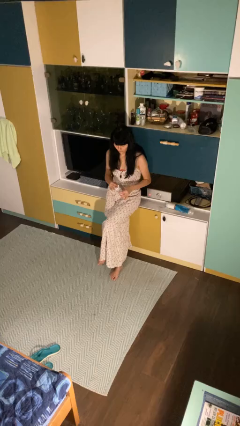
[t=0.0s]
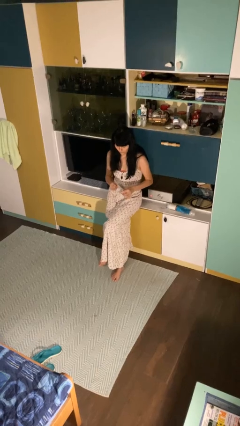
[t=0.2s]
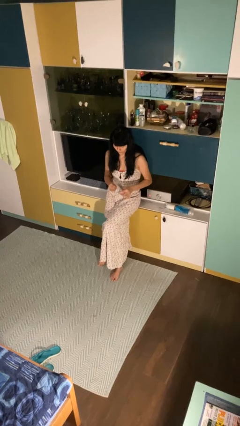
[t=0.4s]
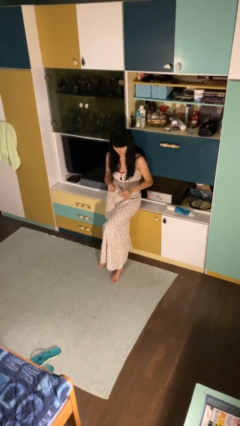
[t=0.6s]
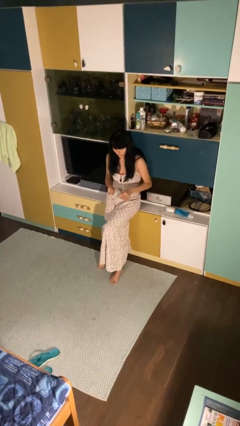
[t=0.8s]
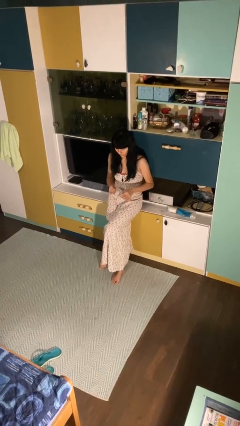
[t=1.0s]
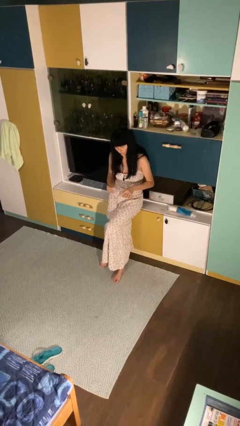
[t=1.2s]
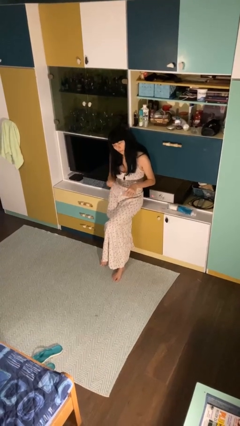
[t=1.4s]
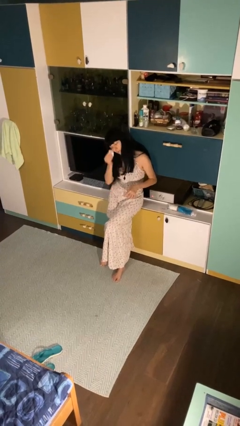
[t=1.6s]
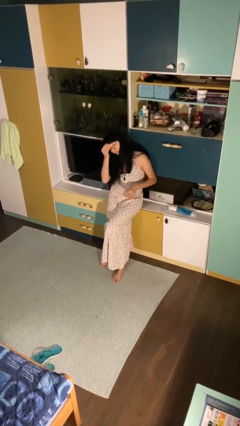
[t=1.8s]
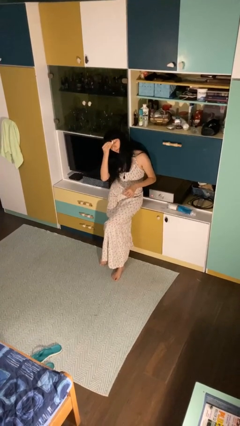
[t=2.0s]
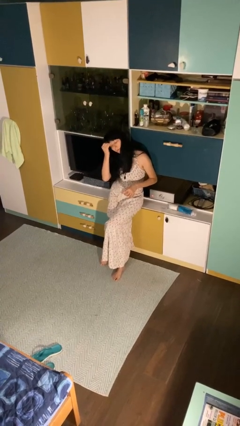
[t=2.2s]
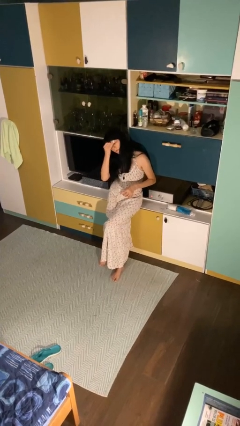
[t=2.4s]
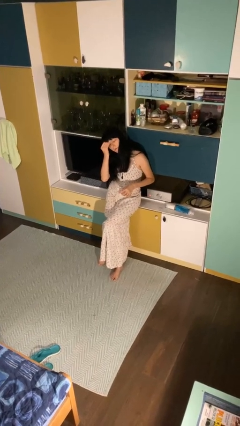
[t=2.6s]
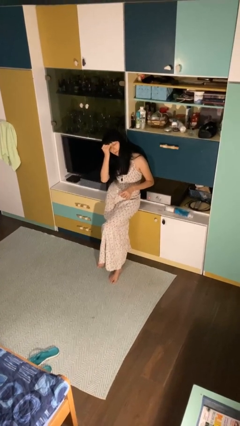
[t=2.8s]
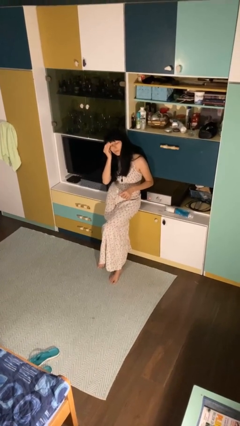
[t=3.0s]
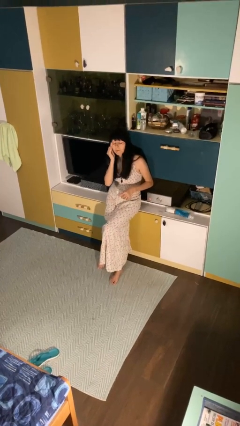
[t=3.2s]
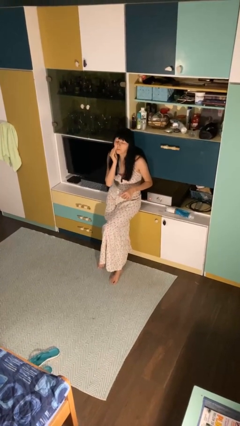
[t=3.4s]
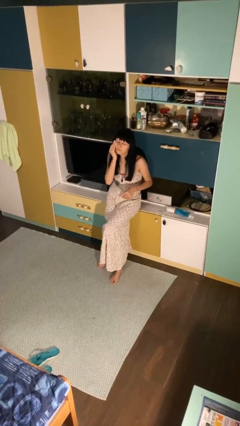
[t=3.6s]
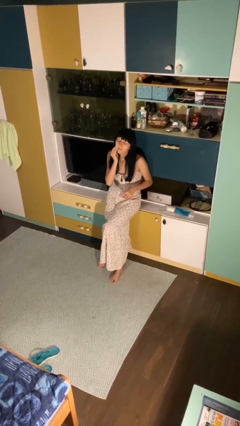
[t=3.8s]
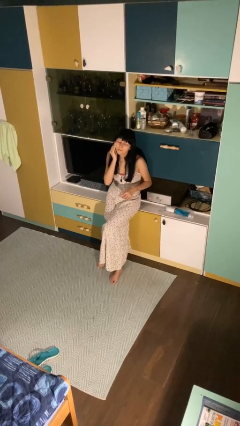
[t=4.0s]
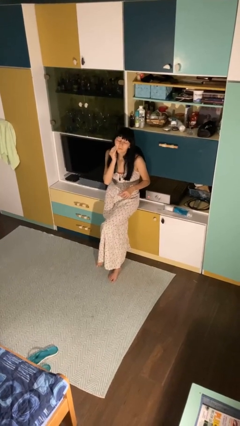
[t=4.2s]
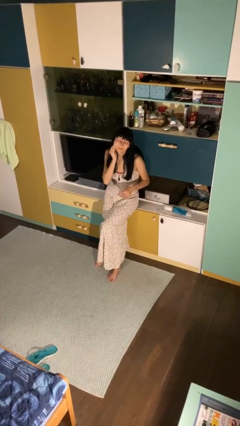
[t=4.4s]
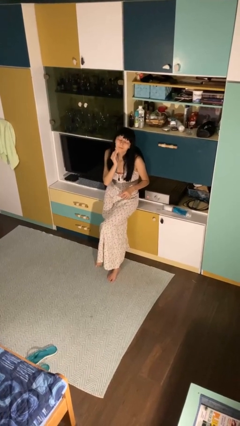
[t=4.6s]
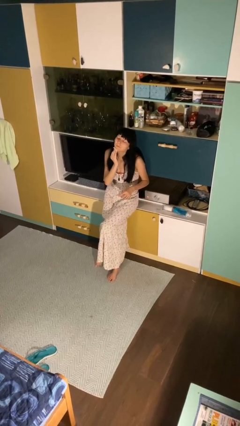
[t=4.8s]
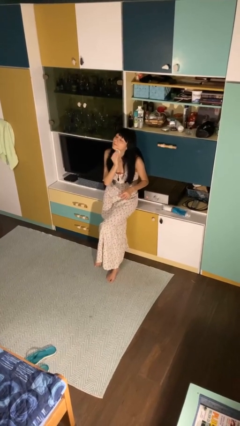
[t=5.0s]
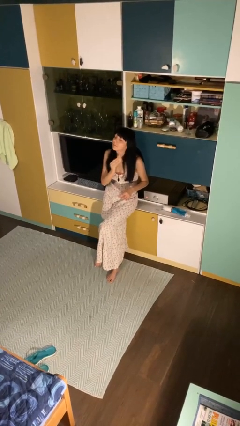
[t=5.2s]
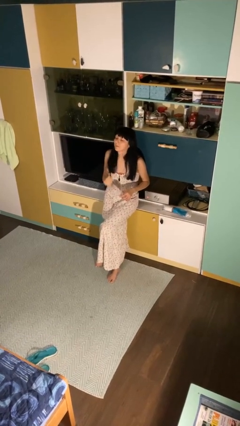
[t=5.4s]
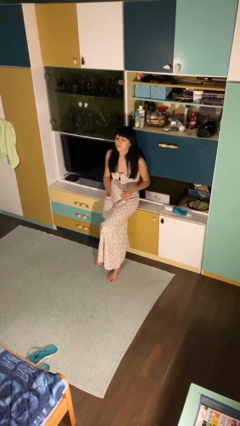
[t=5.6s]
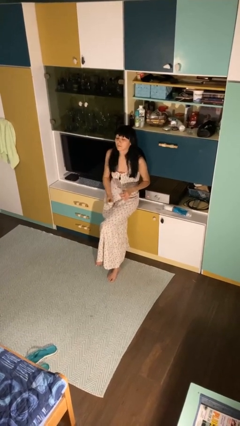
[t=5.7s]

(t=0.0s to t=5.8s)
person applies facial moisturizer

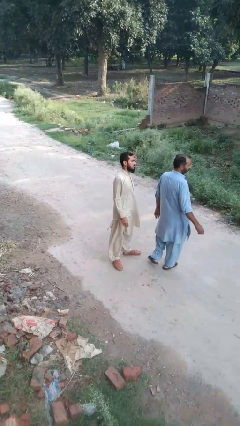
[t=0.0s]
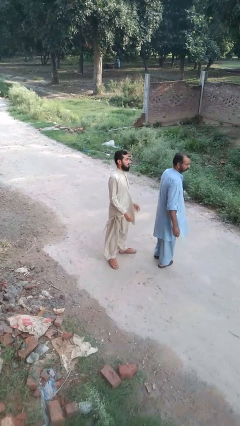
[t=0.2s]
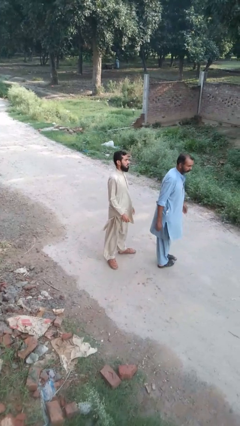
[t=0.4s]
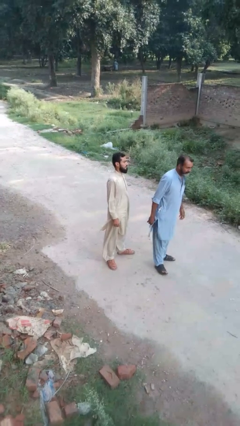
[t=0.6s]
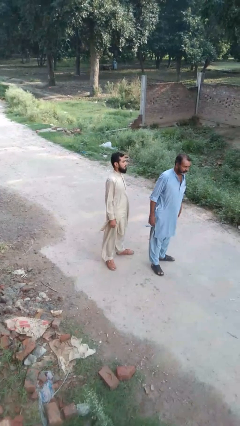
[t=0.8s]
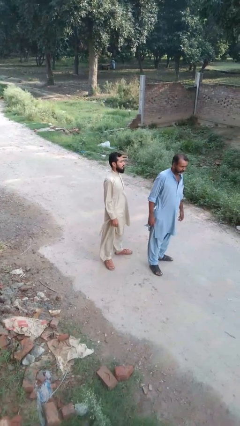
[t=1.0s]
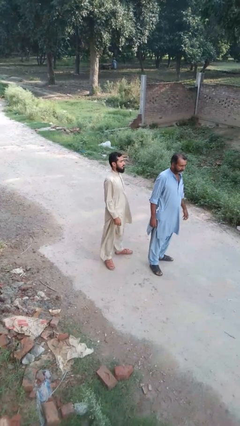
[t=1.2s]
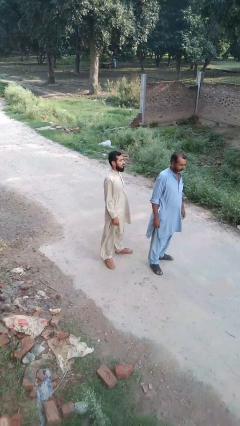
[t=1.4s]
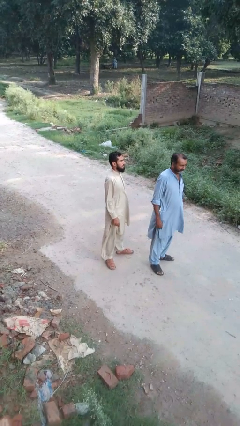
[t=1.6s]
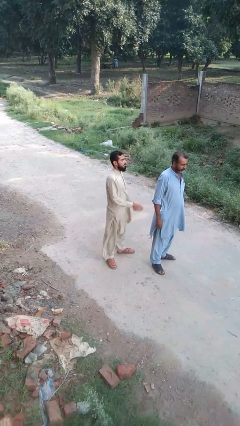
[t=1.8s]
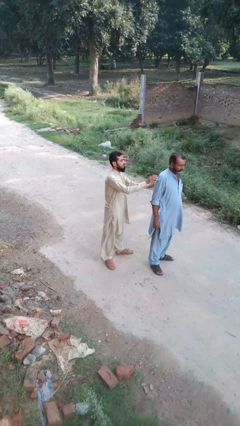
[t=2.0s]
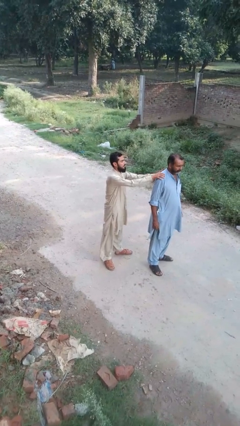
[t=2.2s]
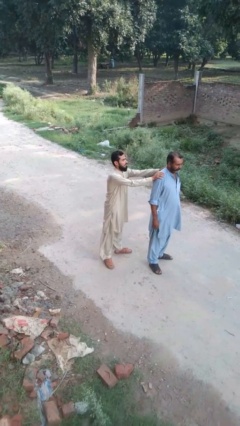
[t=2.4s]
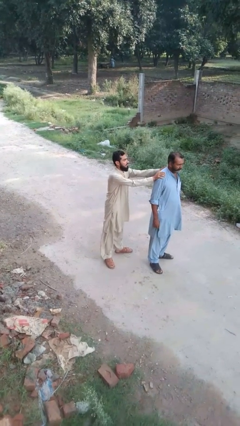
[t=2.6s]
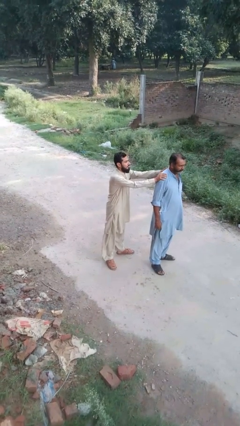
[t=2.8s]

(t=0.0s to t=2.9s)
person grabs person by shoulder

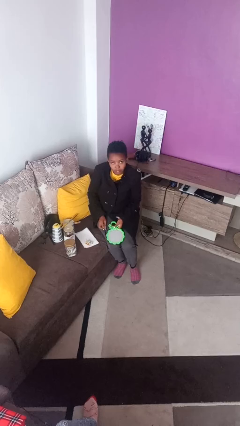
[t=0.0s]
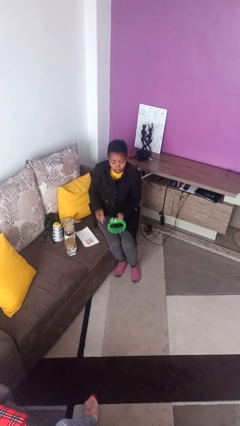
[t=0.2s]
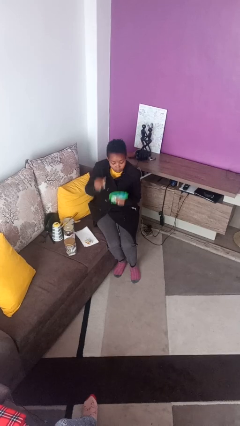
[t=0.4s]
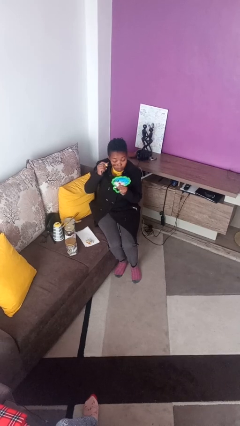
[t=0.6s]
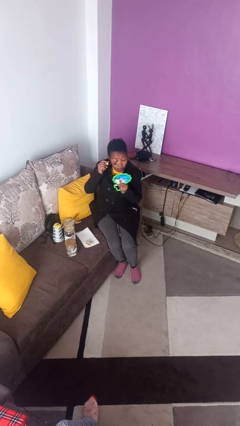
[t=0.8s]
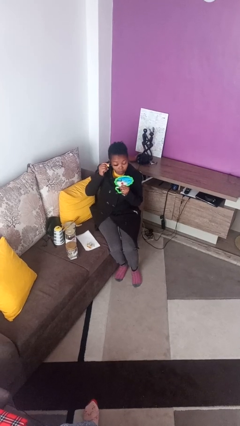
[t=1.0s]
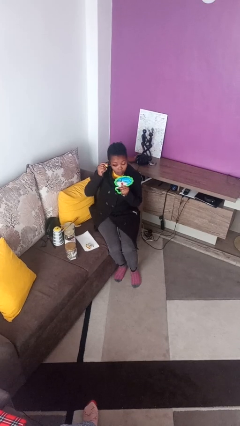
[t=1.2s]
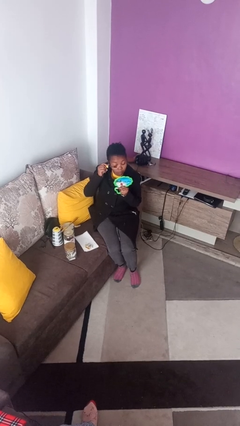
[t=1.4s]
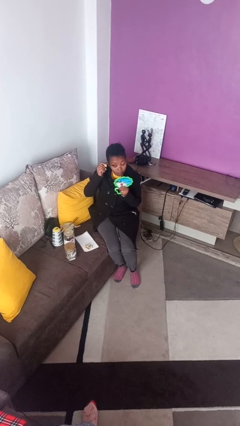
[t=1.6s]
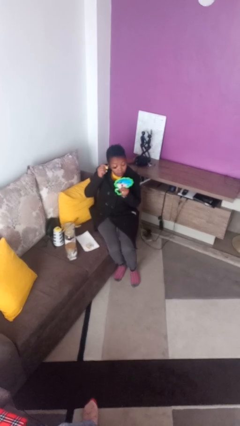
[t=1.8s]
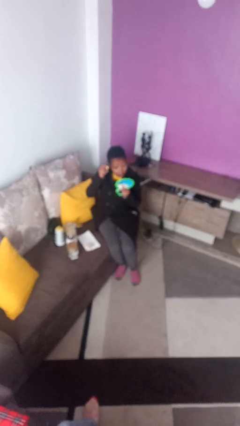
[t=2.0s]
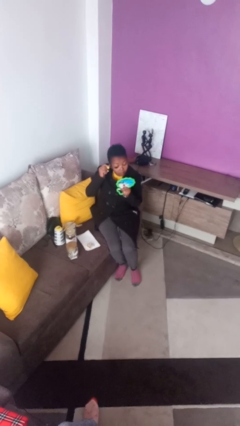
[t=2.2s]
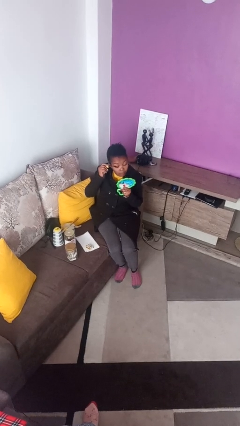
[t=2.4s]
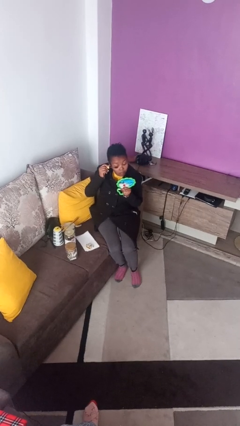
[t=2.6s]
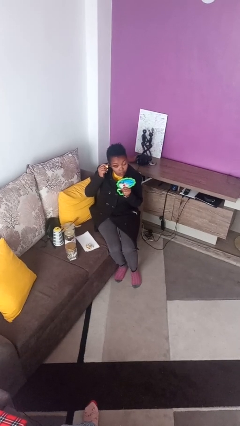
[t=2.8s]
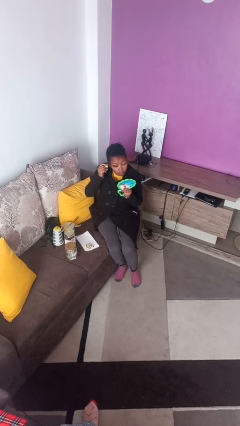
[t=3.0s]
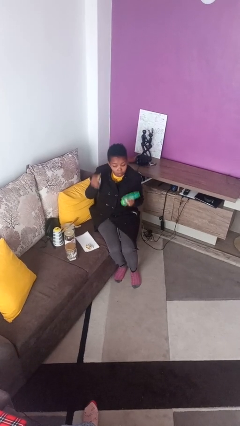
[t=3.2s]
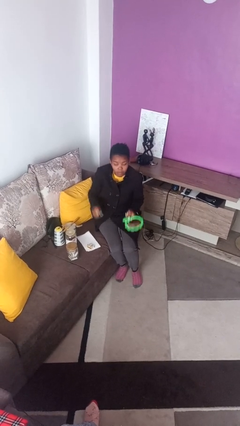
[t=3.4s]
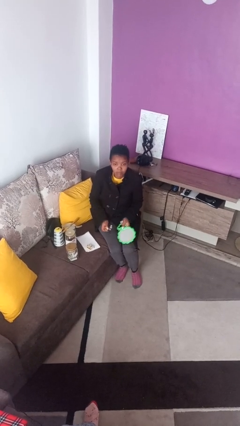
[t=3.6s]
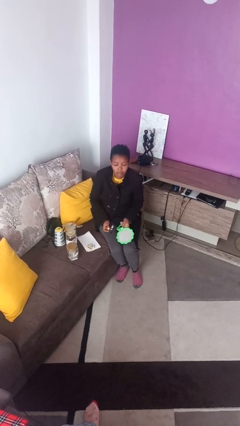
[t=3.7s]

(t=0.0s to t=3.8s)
person applies eye makeup

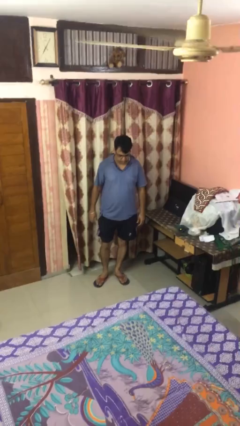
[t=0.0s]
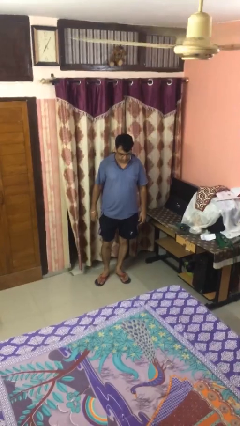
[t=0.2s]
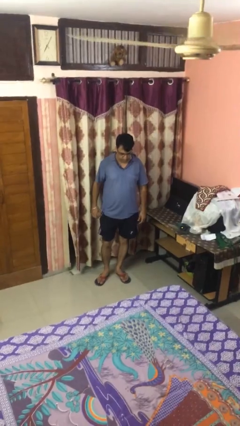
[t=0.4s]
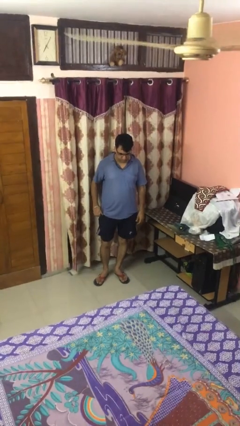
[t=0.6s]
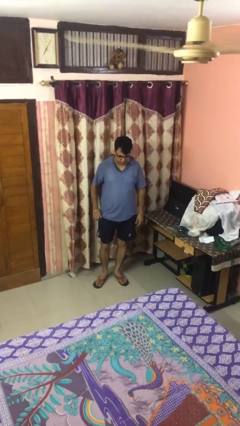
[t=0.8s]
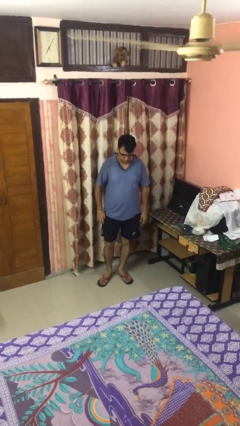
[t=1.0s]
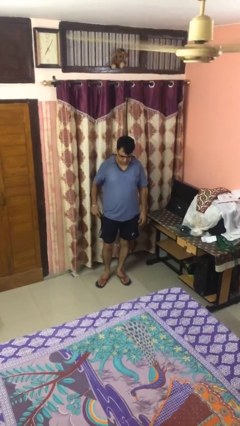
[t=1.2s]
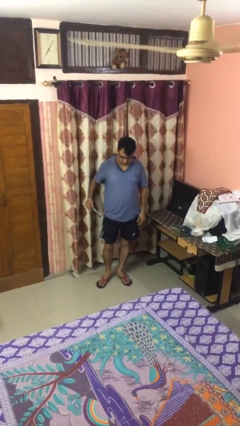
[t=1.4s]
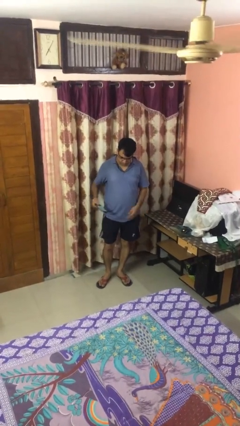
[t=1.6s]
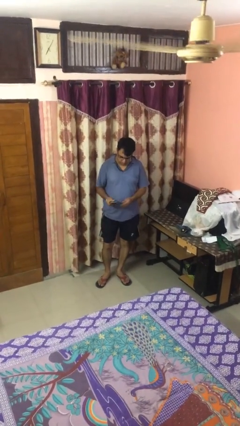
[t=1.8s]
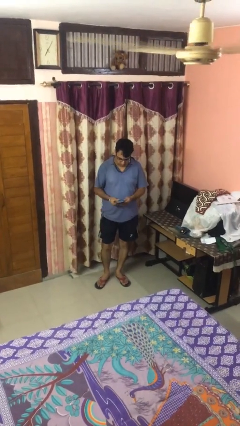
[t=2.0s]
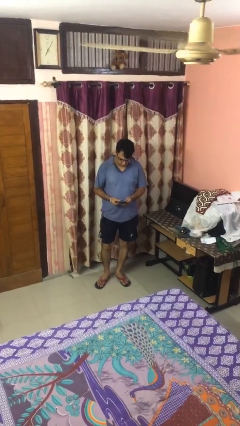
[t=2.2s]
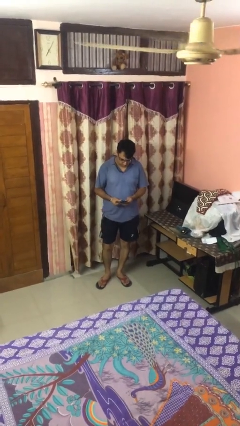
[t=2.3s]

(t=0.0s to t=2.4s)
person takes phone from pocket

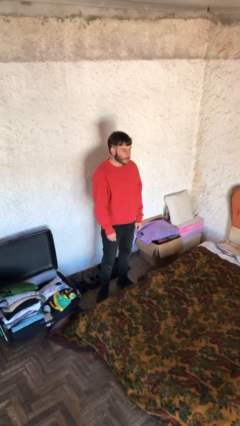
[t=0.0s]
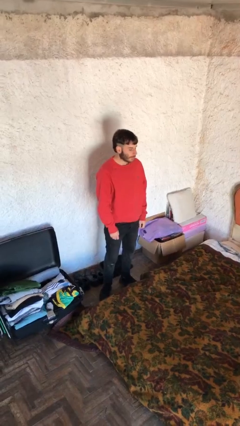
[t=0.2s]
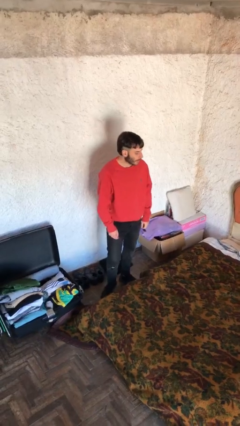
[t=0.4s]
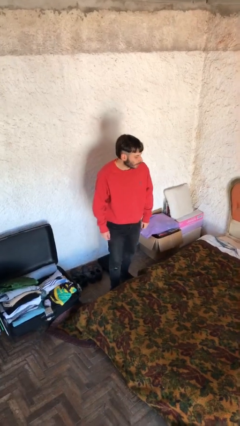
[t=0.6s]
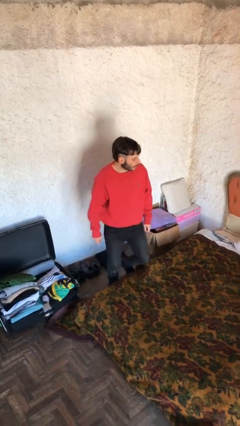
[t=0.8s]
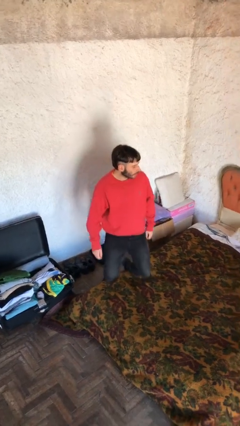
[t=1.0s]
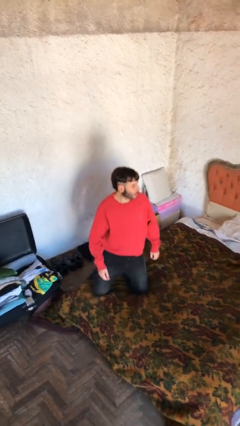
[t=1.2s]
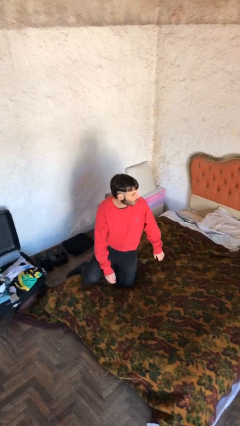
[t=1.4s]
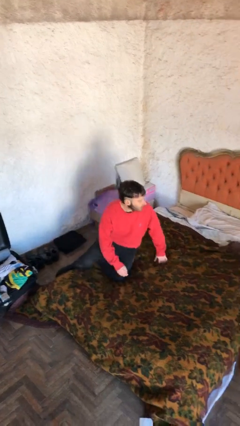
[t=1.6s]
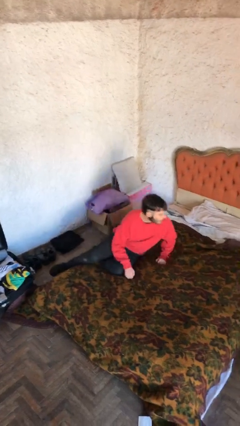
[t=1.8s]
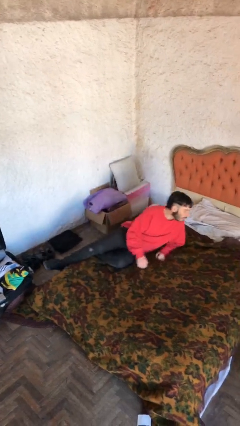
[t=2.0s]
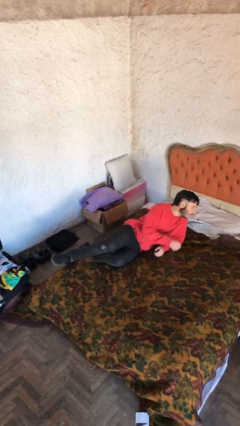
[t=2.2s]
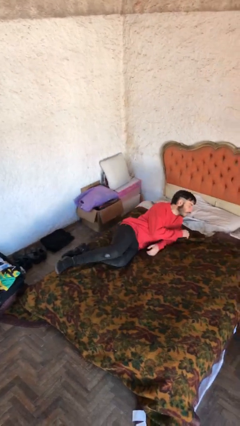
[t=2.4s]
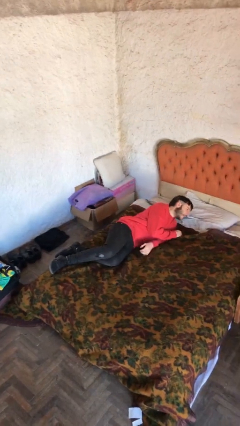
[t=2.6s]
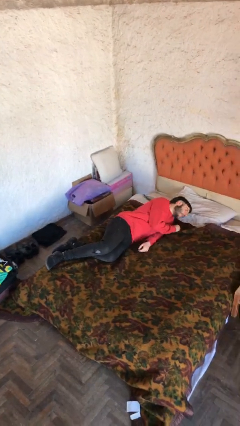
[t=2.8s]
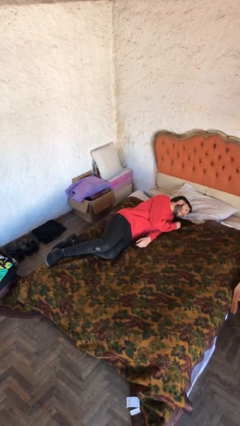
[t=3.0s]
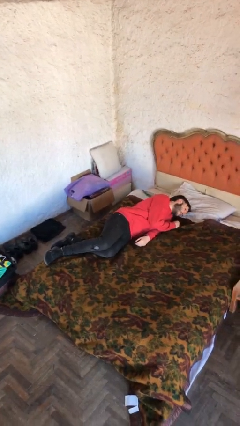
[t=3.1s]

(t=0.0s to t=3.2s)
person lies down on bed
